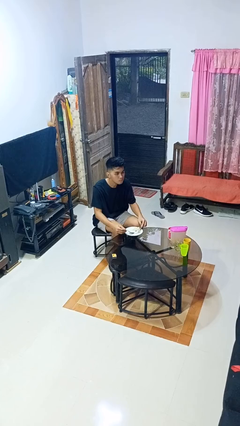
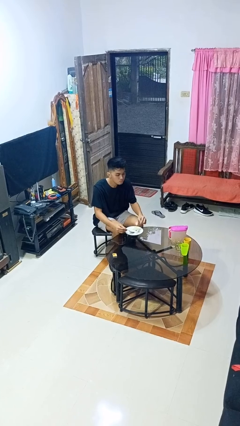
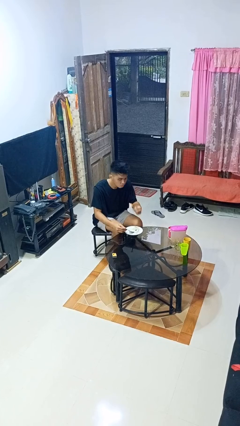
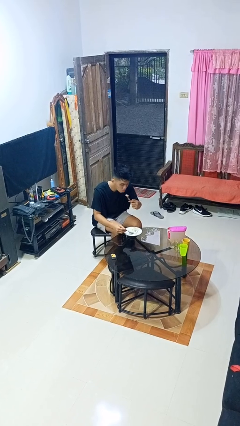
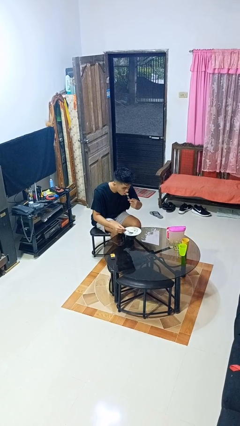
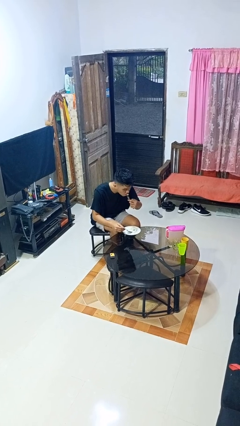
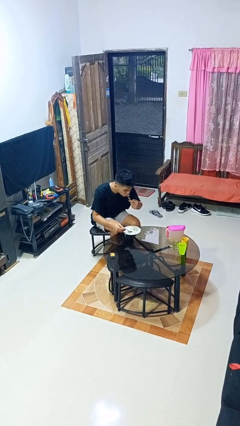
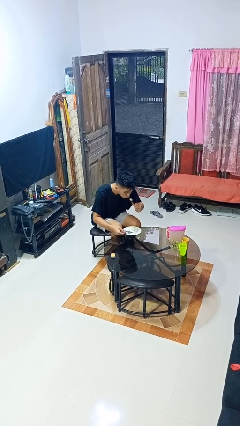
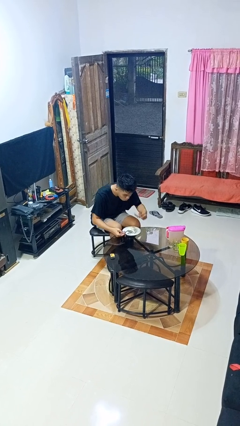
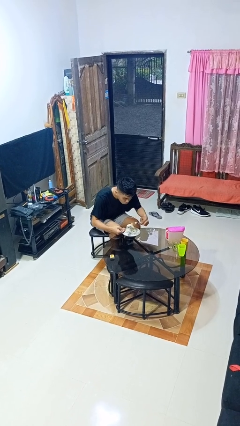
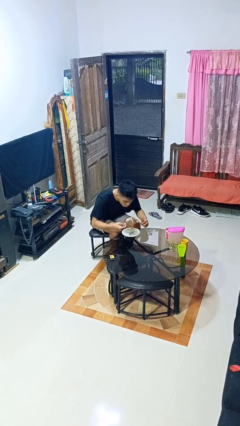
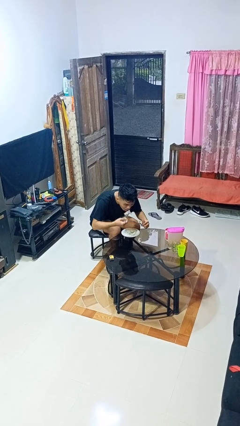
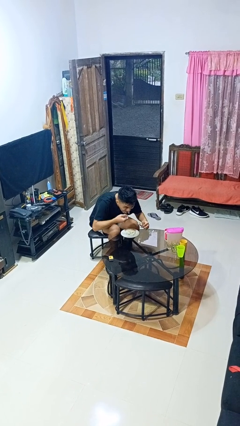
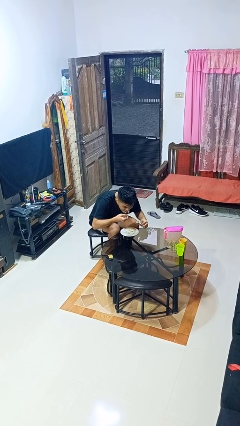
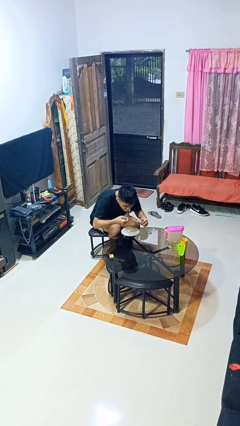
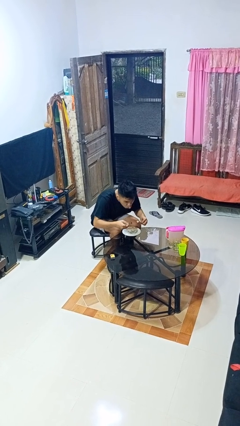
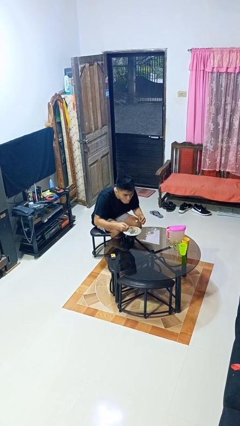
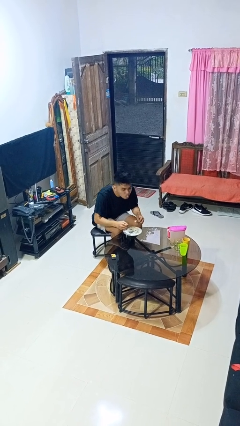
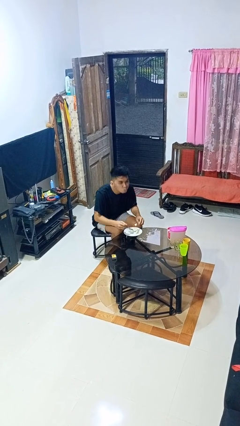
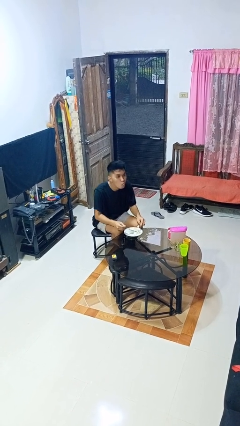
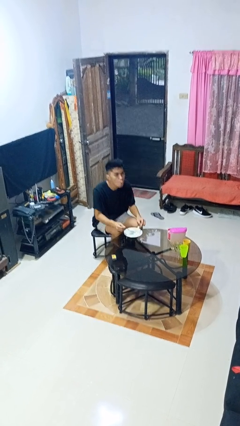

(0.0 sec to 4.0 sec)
person eats with utensil

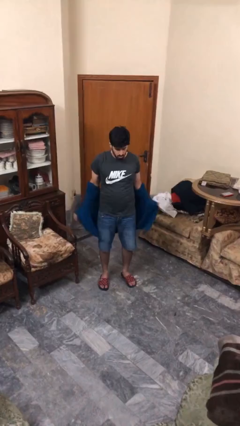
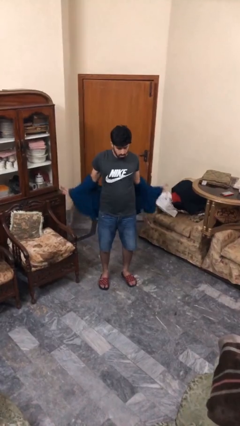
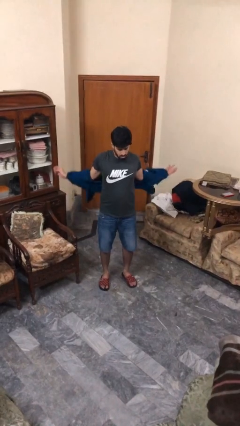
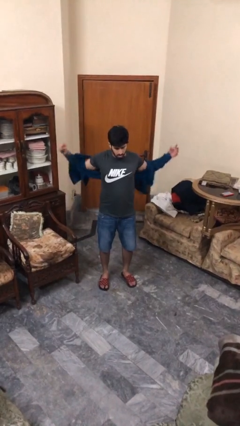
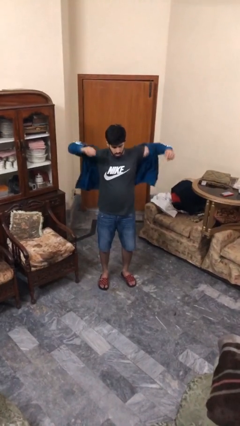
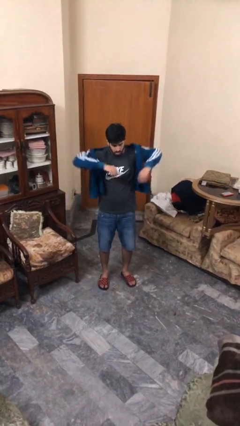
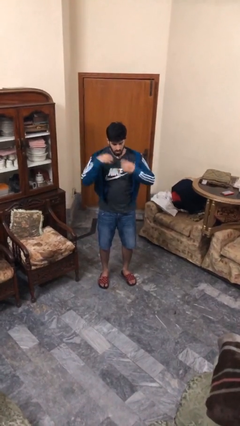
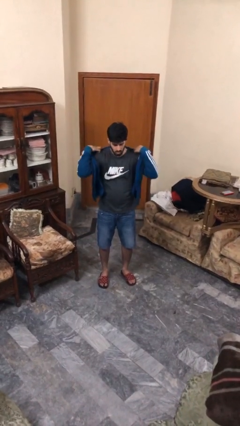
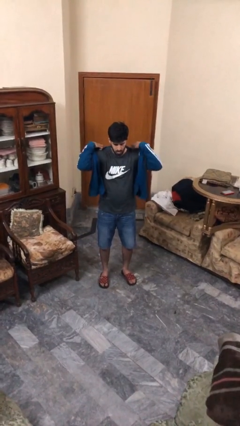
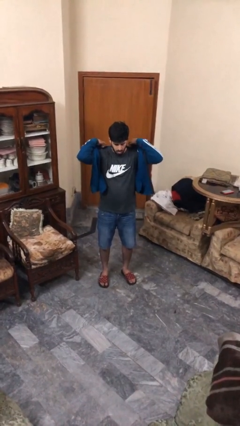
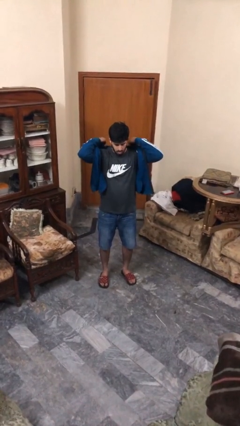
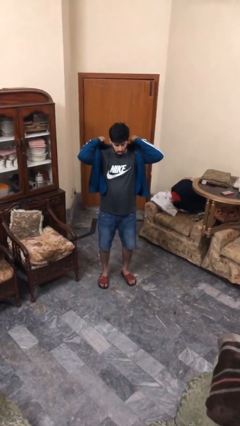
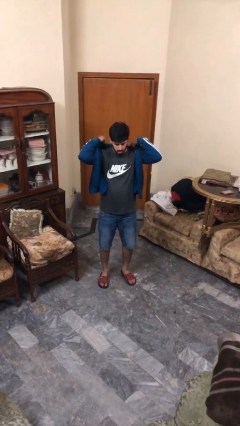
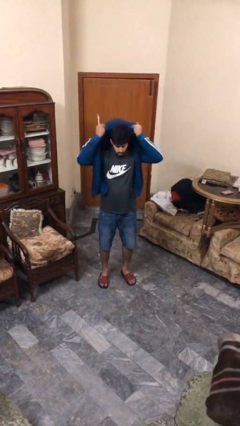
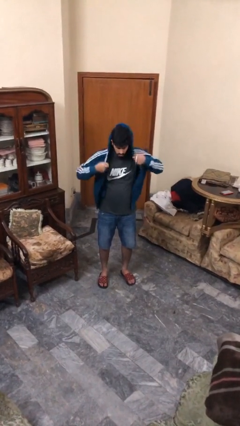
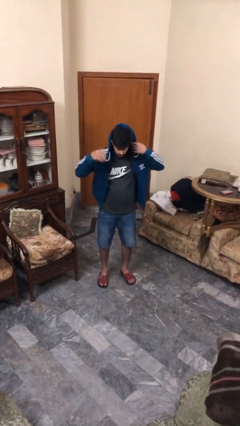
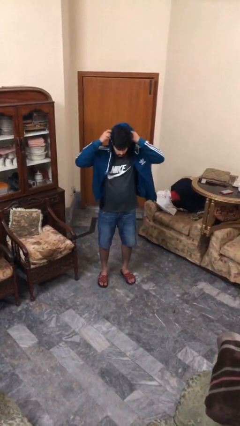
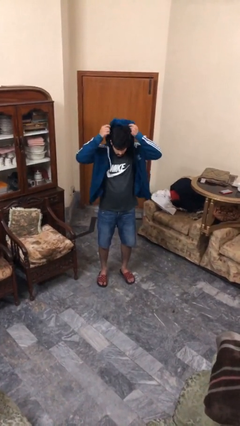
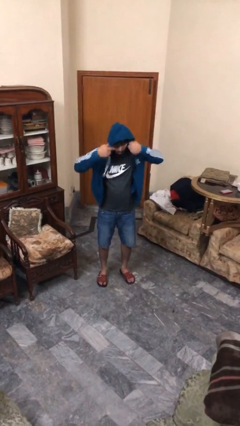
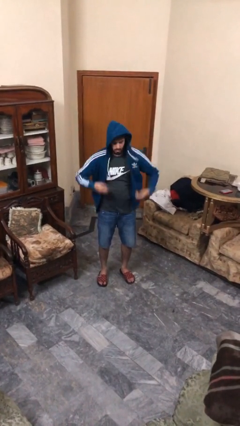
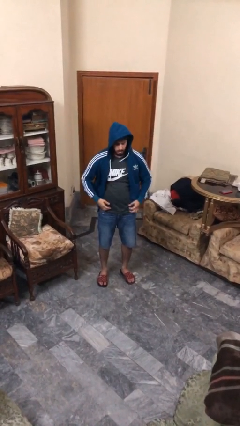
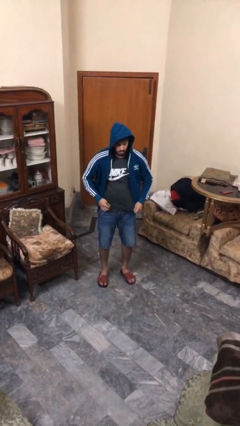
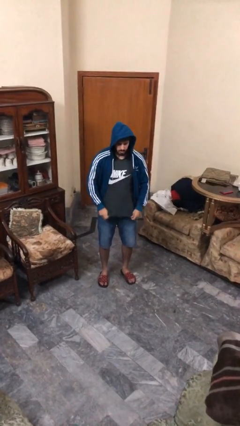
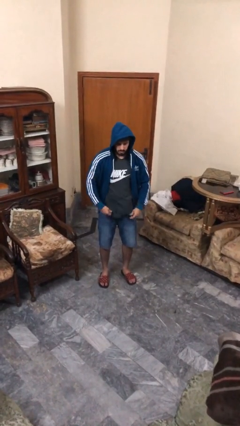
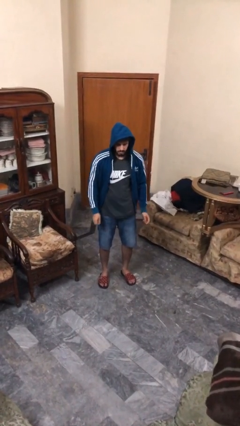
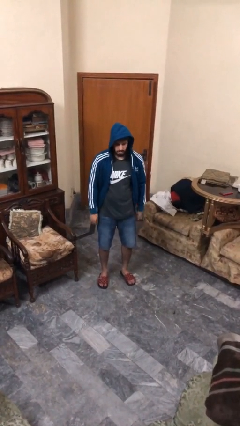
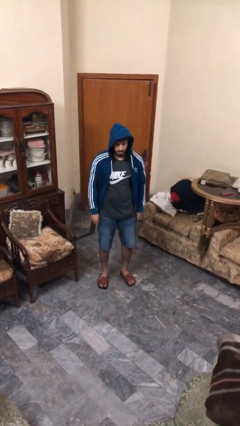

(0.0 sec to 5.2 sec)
person puts on hoodie

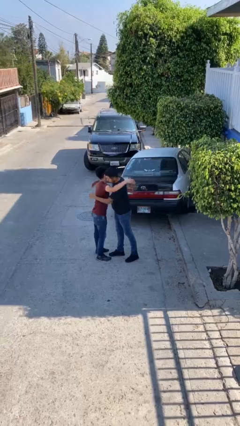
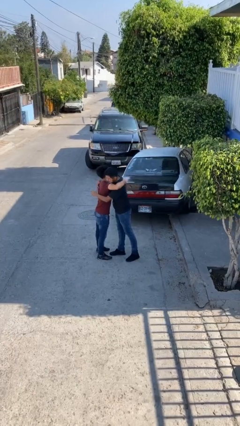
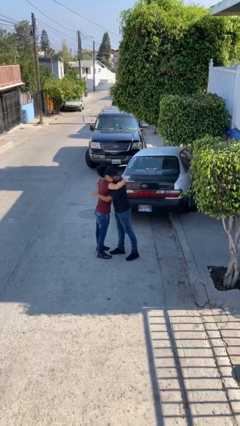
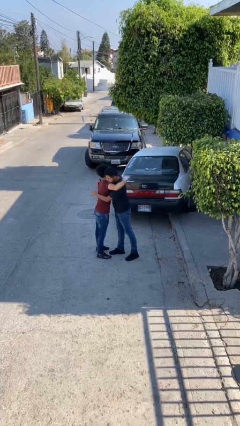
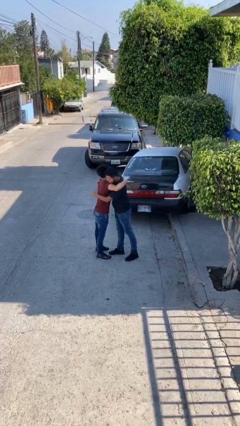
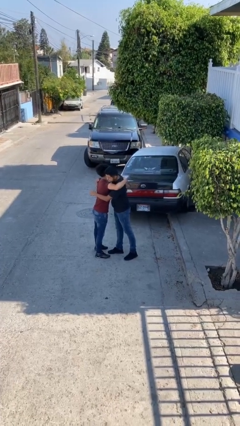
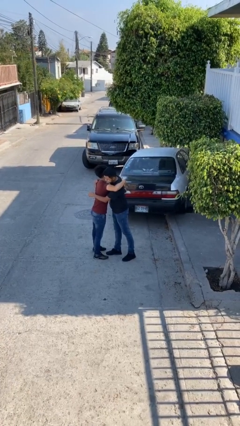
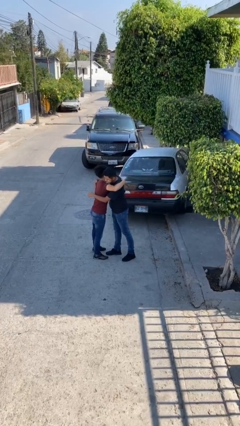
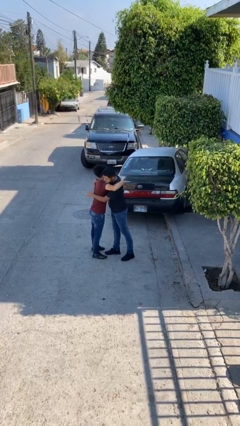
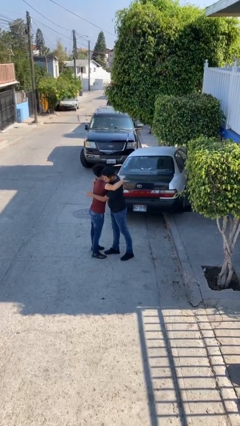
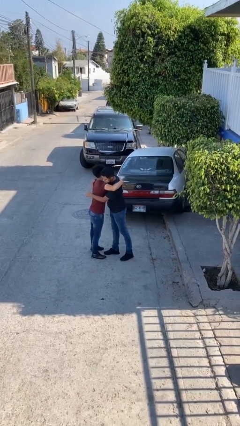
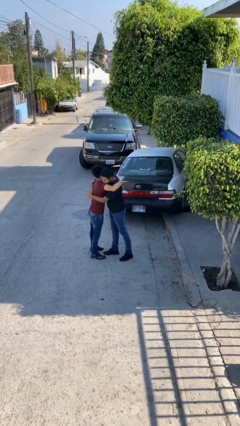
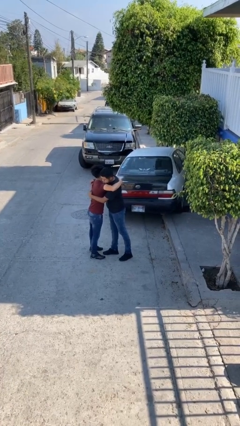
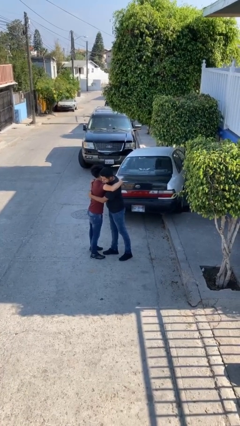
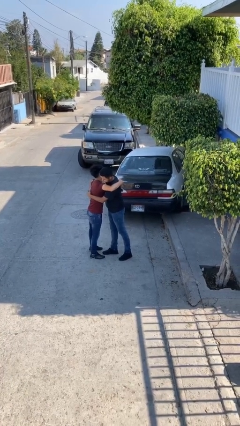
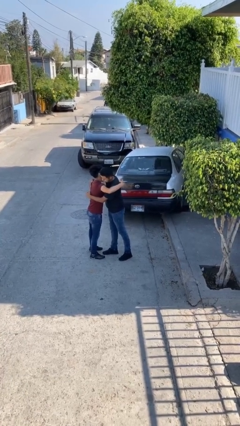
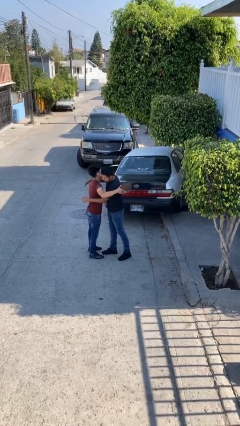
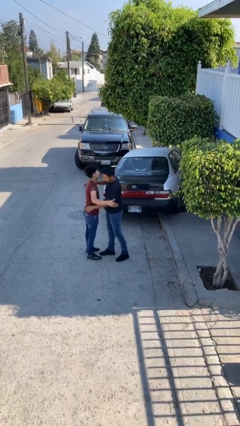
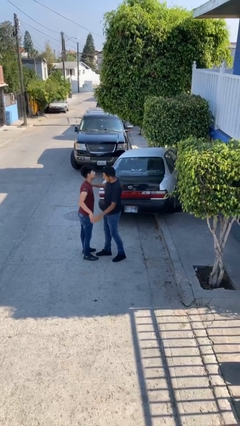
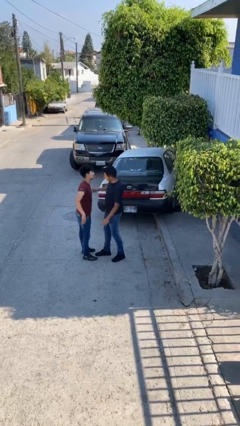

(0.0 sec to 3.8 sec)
person embraces person

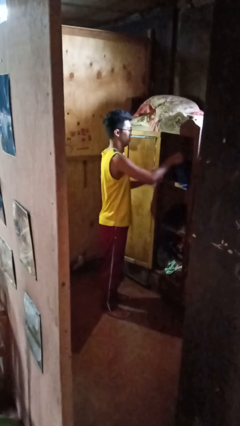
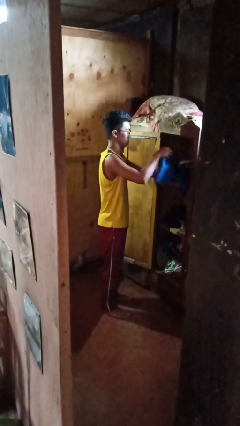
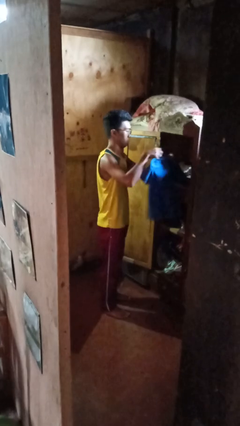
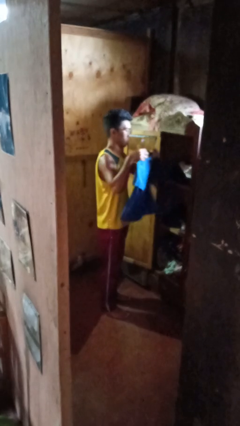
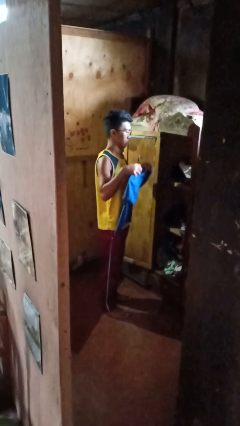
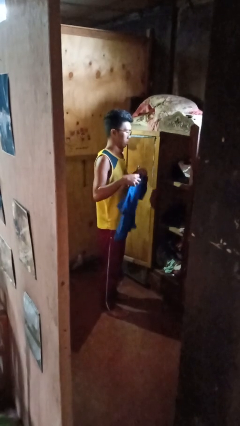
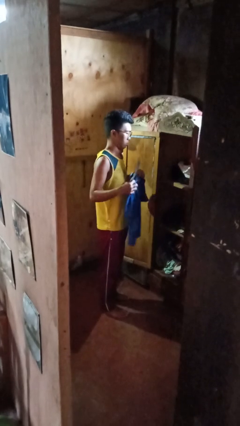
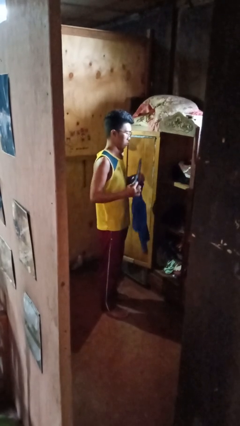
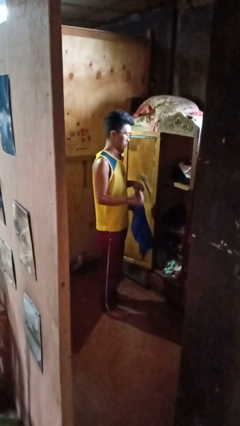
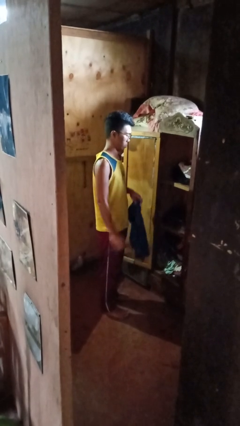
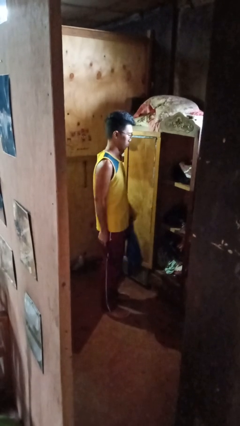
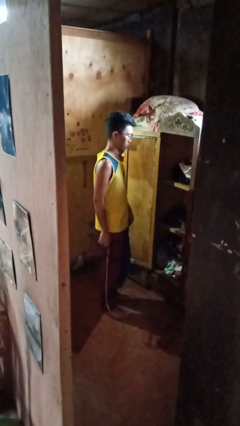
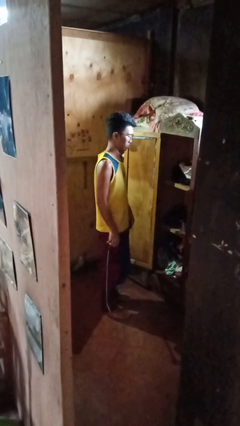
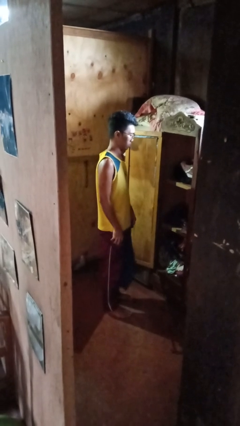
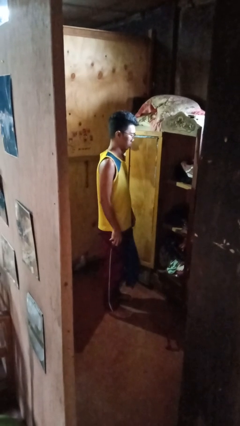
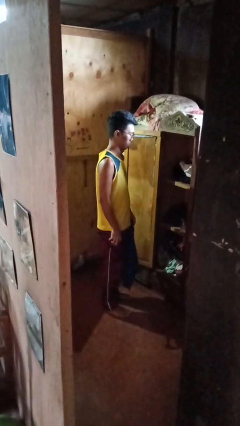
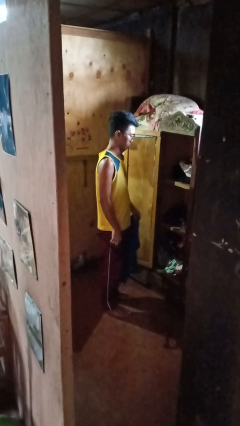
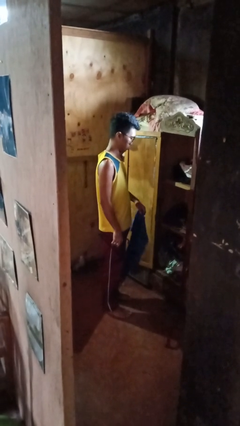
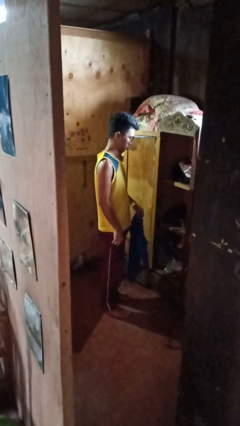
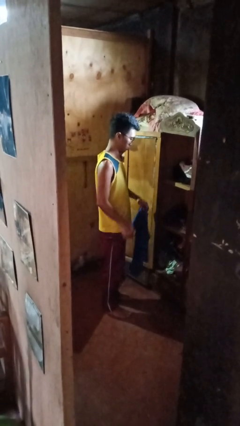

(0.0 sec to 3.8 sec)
person takes clothes from closet

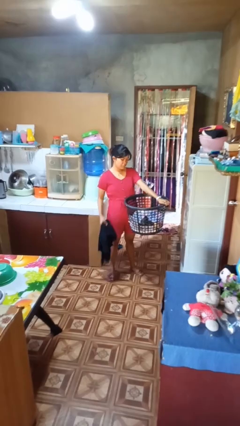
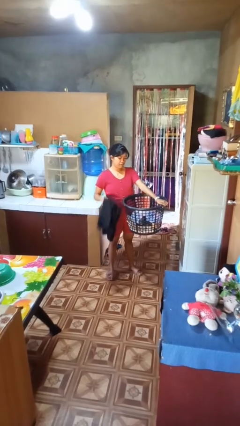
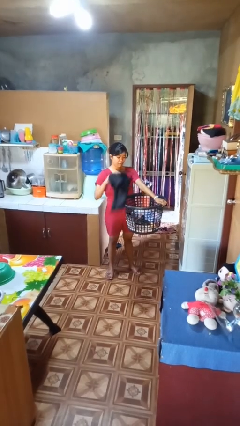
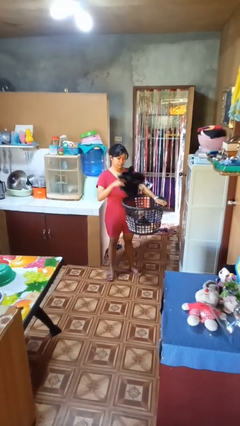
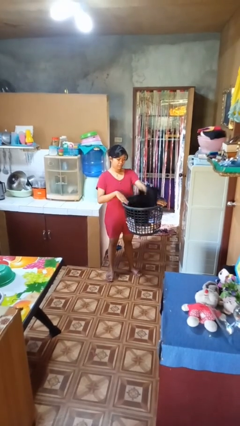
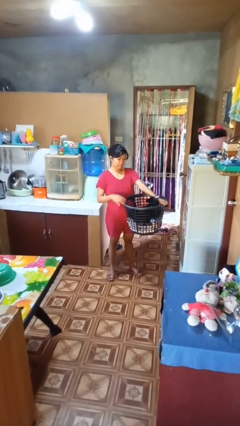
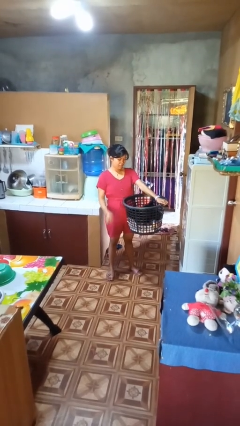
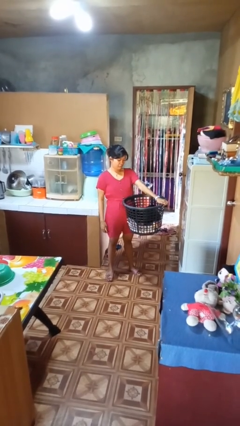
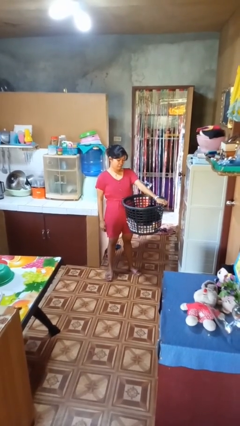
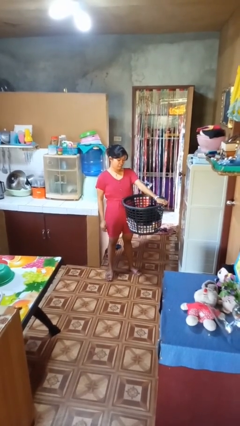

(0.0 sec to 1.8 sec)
person puts object into basket
